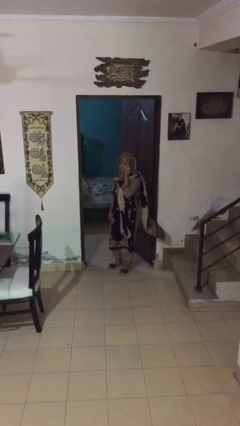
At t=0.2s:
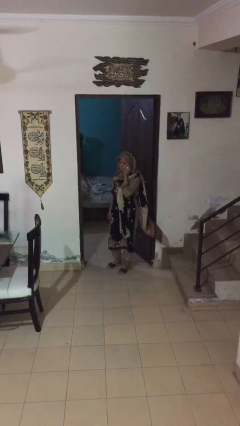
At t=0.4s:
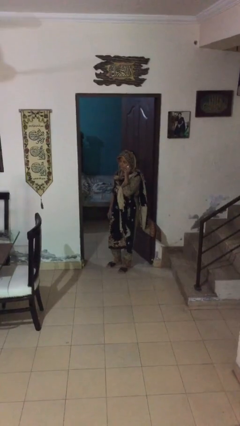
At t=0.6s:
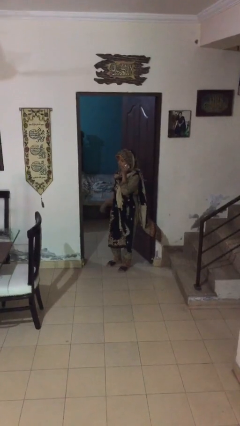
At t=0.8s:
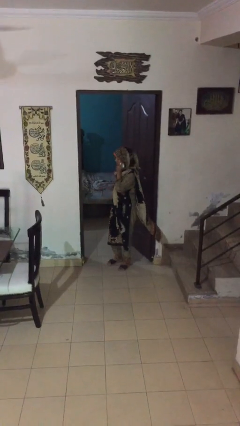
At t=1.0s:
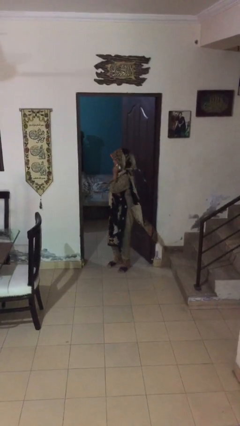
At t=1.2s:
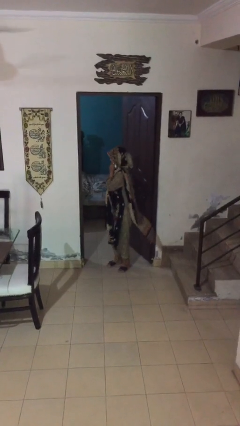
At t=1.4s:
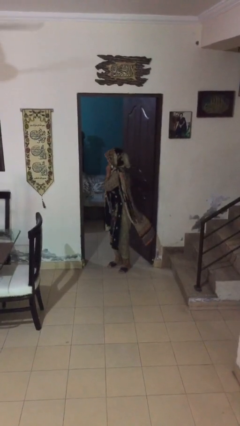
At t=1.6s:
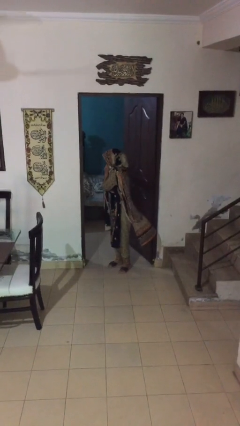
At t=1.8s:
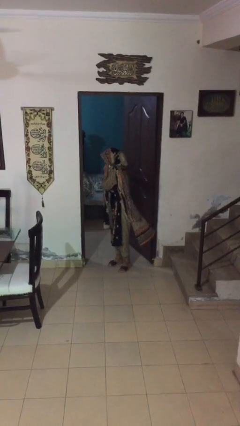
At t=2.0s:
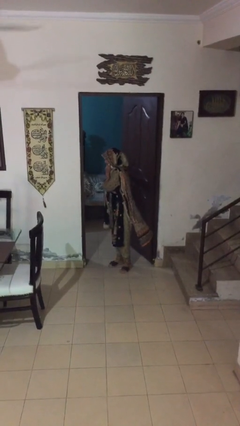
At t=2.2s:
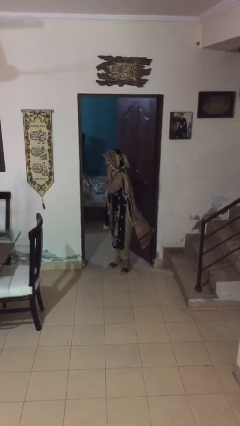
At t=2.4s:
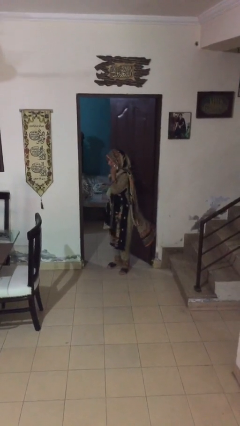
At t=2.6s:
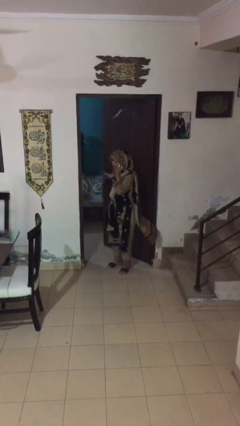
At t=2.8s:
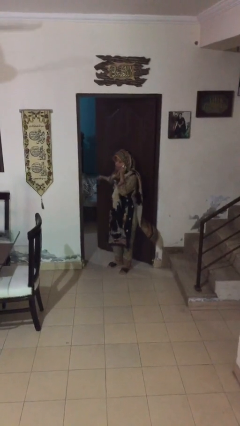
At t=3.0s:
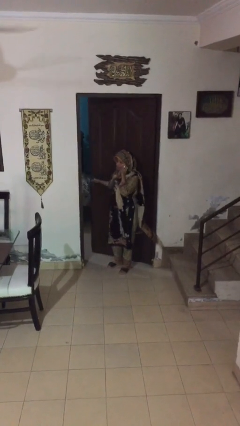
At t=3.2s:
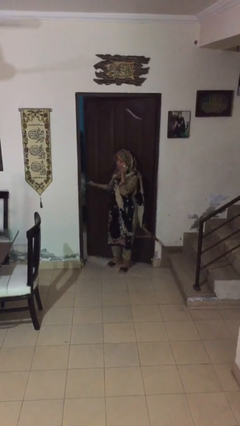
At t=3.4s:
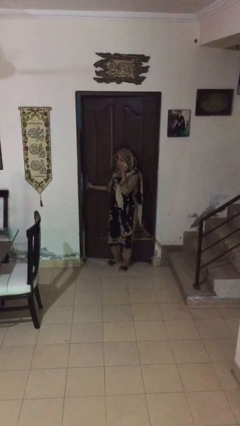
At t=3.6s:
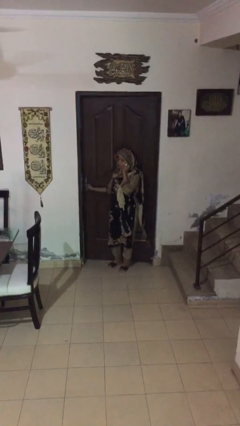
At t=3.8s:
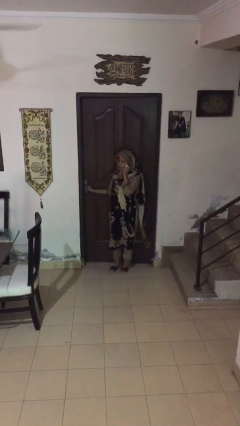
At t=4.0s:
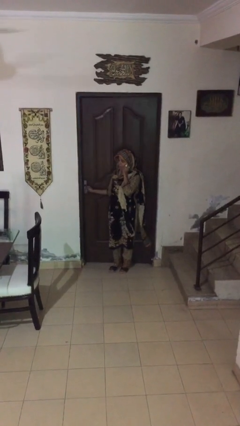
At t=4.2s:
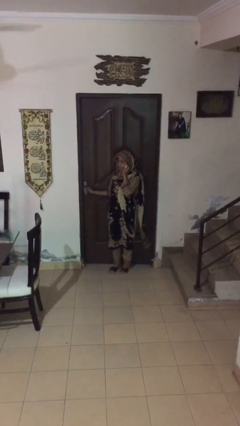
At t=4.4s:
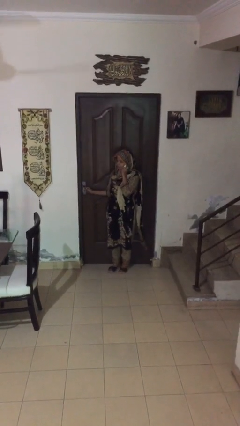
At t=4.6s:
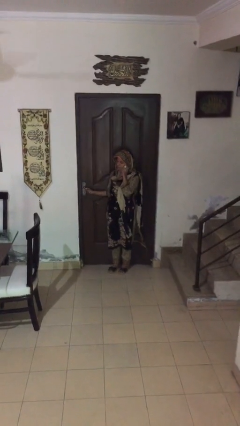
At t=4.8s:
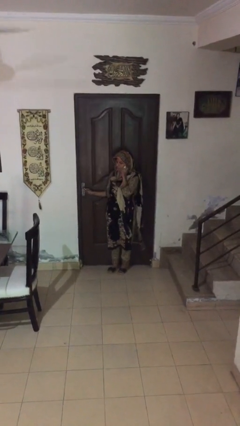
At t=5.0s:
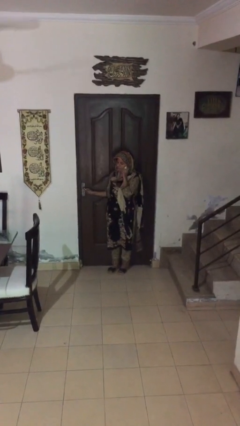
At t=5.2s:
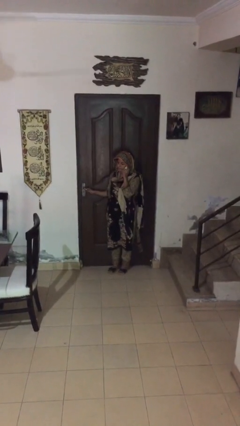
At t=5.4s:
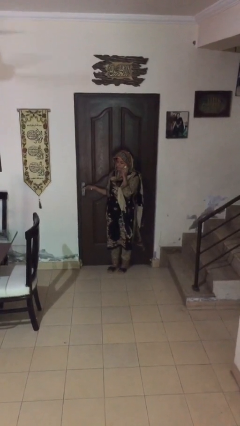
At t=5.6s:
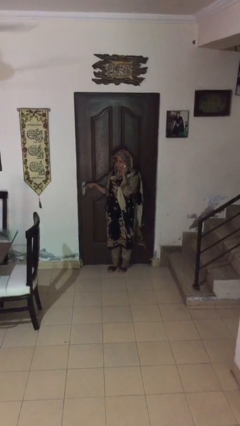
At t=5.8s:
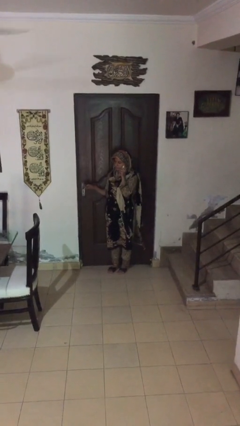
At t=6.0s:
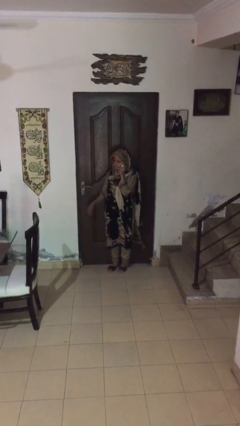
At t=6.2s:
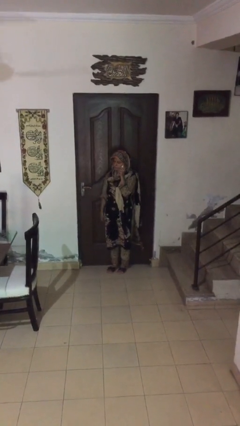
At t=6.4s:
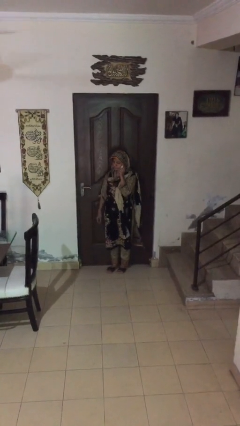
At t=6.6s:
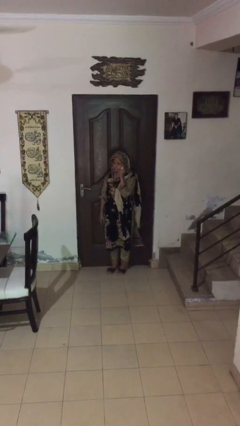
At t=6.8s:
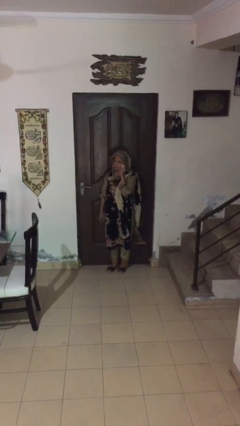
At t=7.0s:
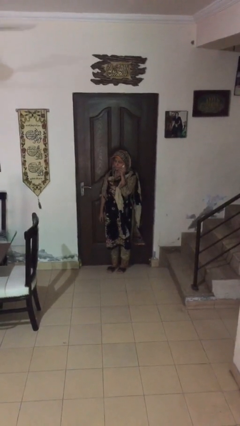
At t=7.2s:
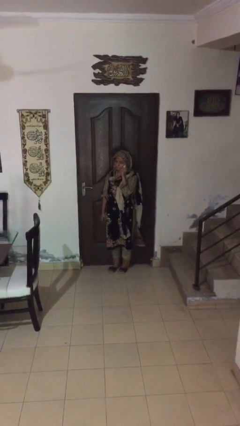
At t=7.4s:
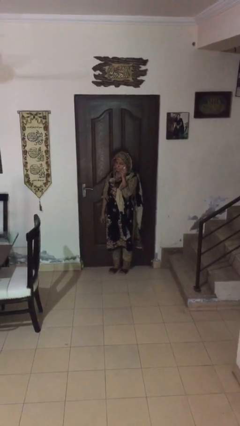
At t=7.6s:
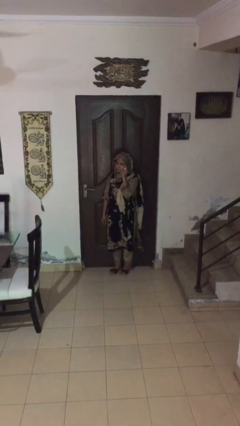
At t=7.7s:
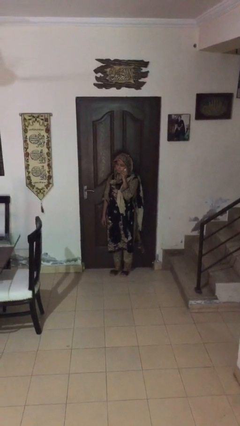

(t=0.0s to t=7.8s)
person closes facility door

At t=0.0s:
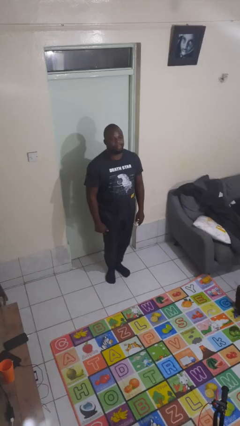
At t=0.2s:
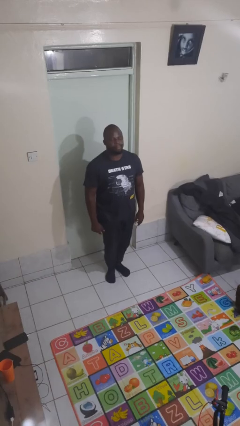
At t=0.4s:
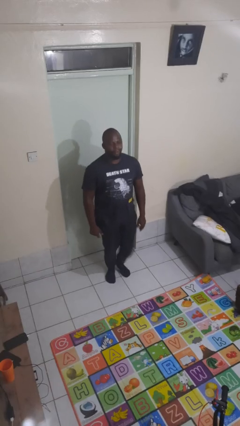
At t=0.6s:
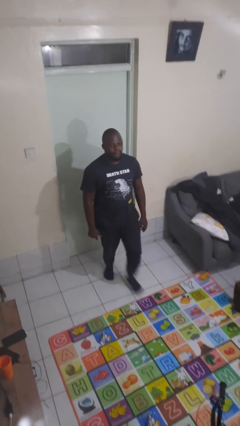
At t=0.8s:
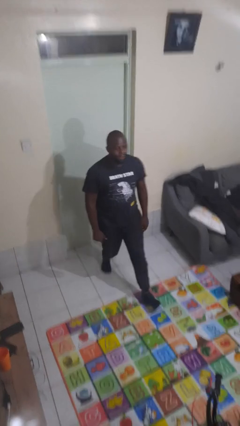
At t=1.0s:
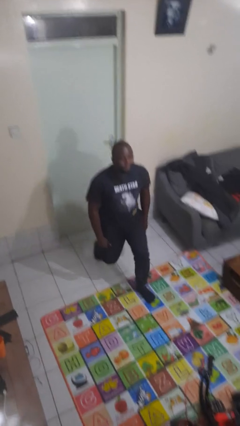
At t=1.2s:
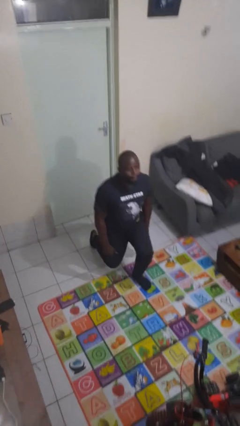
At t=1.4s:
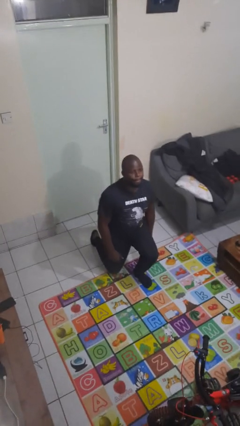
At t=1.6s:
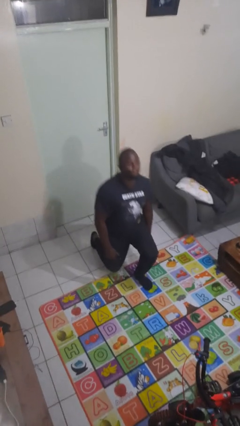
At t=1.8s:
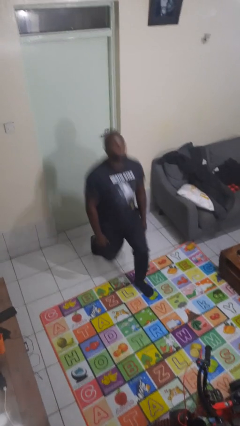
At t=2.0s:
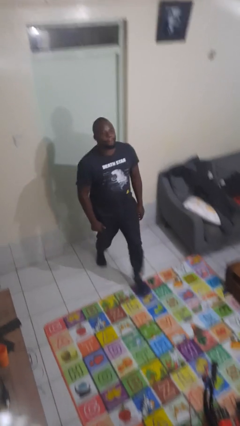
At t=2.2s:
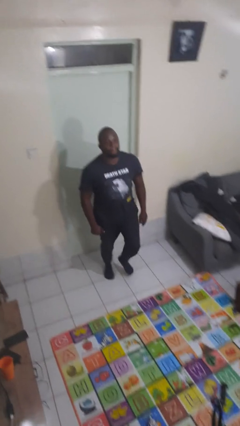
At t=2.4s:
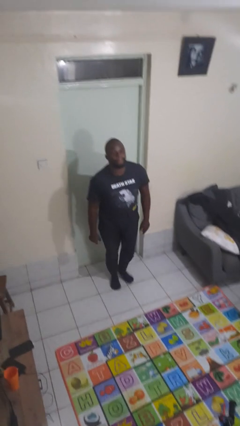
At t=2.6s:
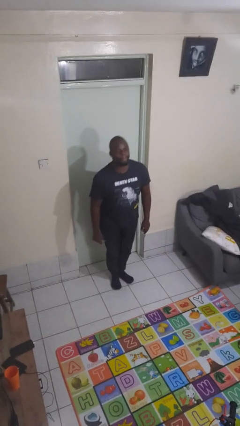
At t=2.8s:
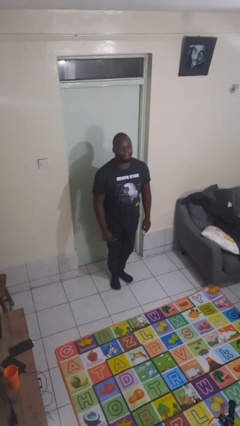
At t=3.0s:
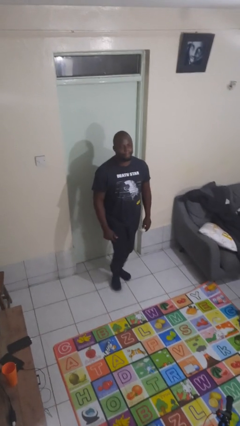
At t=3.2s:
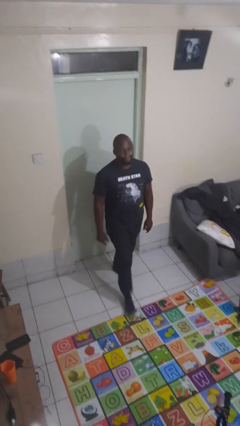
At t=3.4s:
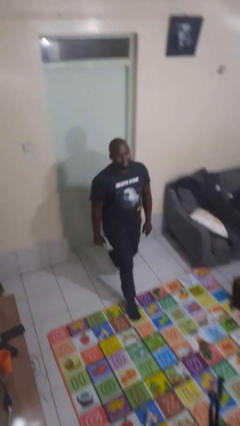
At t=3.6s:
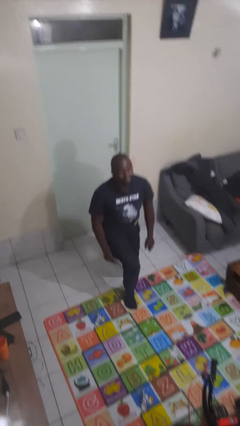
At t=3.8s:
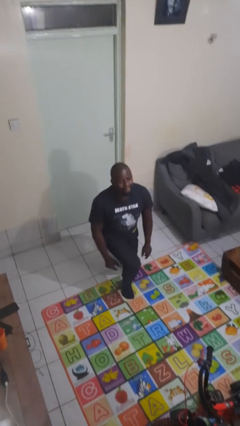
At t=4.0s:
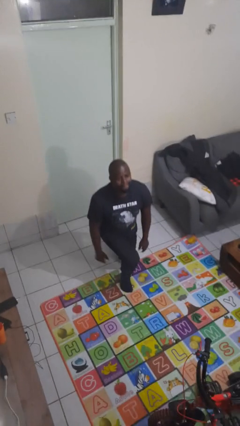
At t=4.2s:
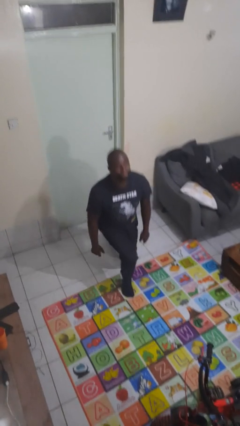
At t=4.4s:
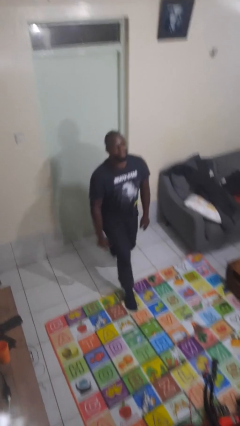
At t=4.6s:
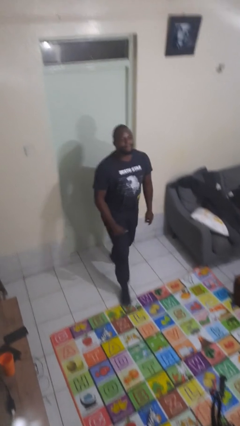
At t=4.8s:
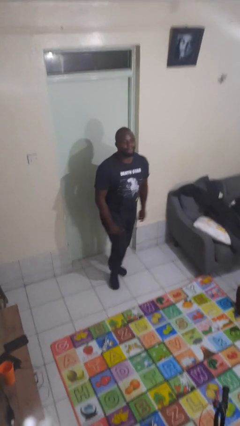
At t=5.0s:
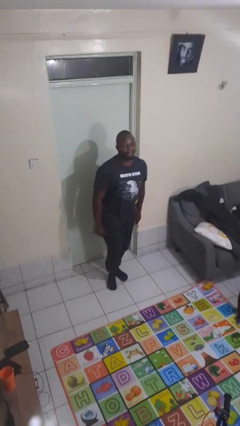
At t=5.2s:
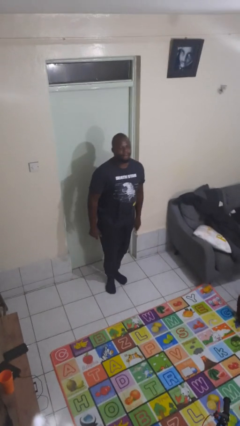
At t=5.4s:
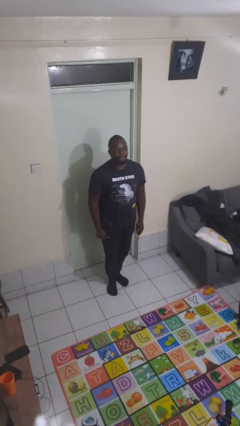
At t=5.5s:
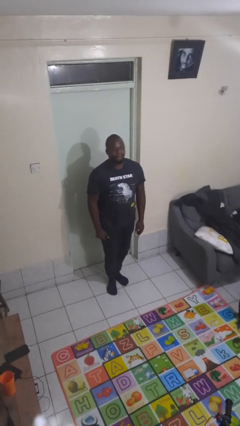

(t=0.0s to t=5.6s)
person exercises with lunges

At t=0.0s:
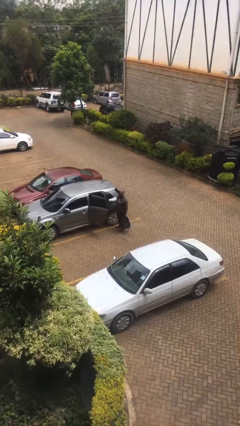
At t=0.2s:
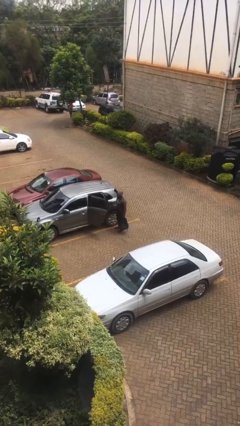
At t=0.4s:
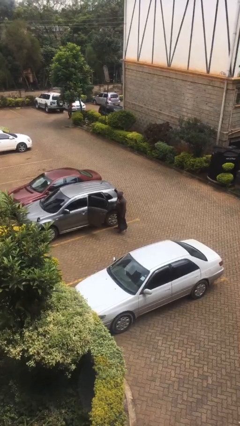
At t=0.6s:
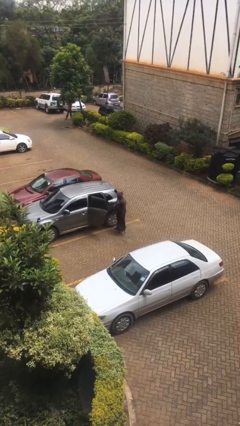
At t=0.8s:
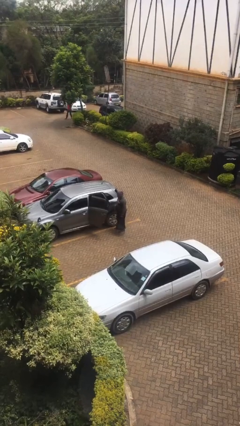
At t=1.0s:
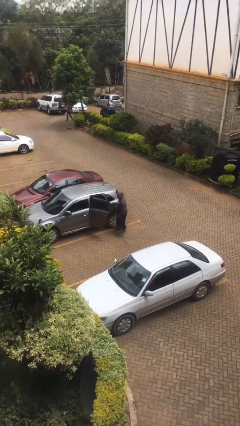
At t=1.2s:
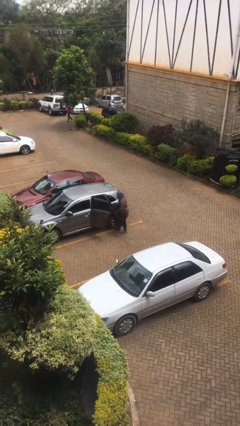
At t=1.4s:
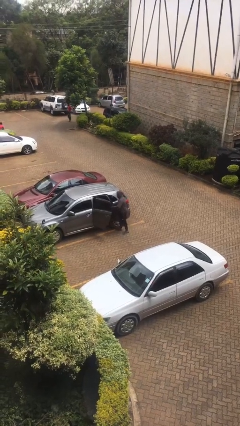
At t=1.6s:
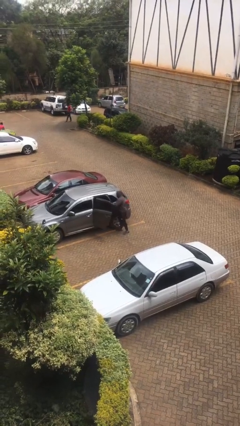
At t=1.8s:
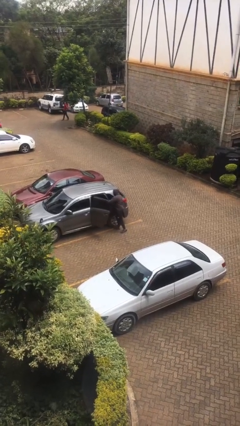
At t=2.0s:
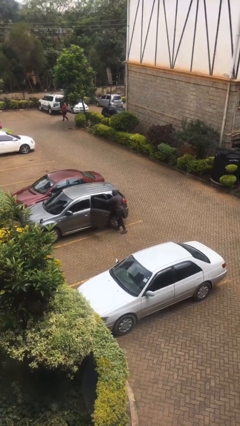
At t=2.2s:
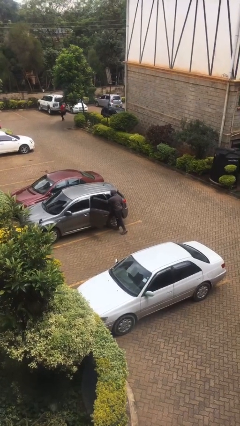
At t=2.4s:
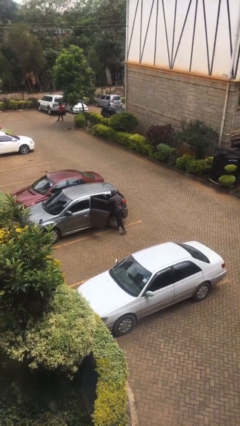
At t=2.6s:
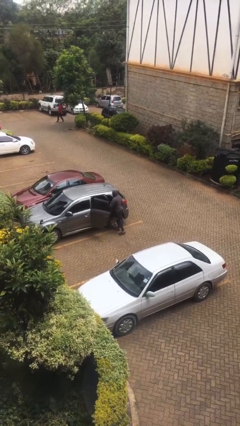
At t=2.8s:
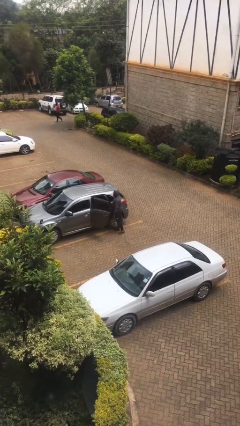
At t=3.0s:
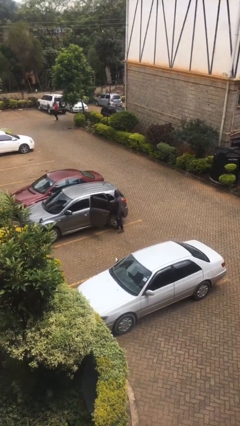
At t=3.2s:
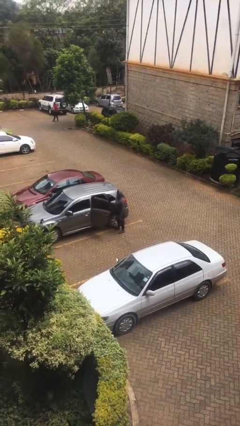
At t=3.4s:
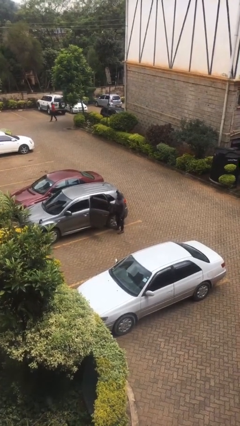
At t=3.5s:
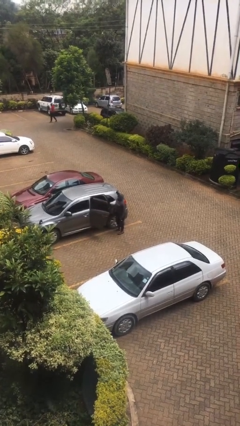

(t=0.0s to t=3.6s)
person loads car

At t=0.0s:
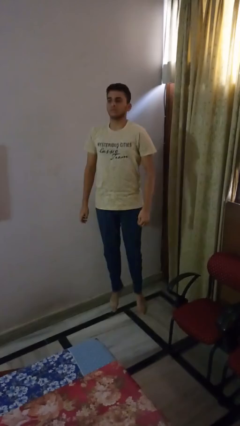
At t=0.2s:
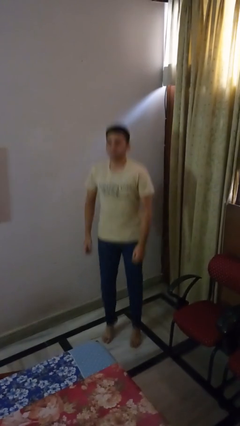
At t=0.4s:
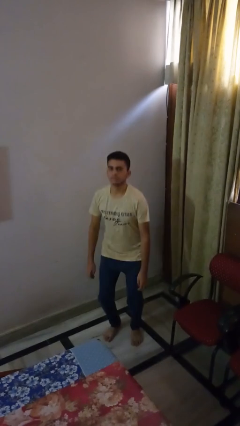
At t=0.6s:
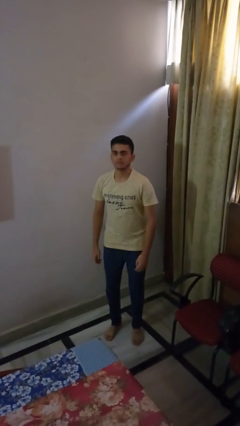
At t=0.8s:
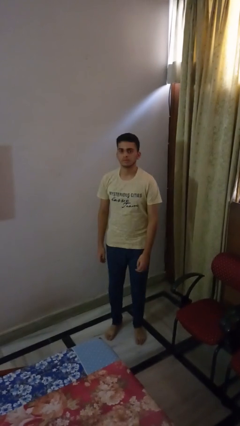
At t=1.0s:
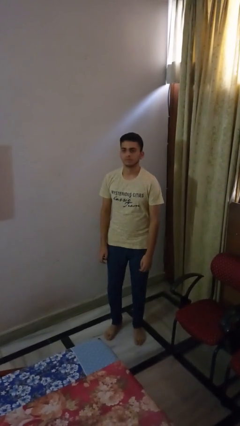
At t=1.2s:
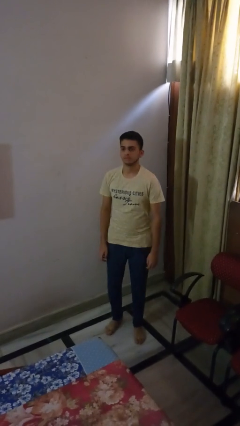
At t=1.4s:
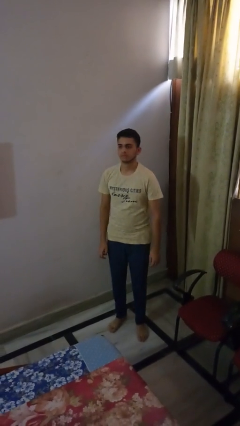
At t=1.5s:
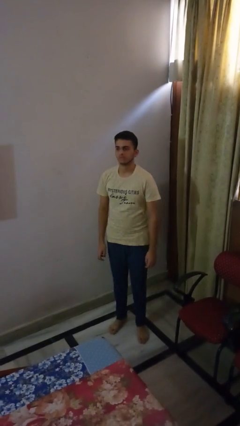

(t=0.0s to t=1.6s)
person jumps
